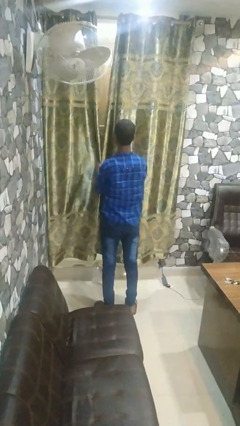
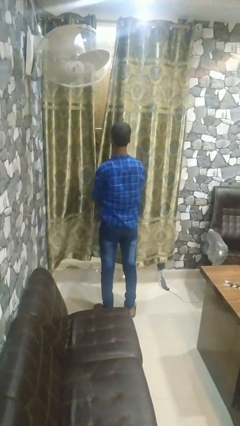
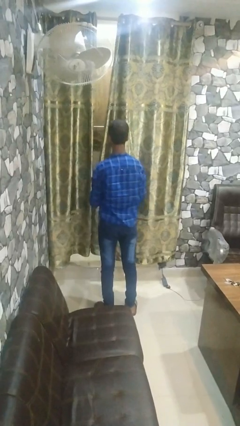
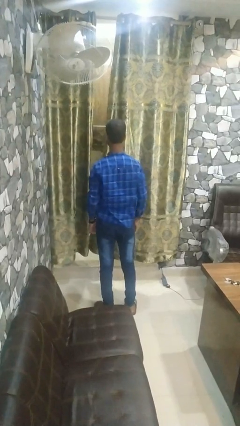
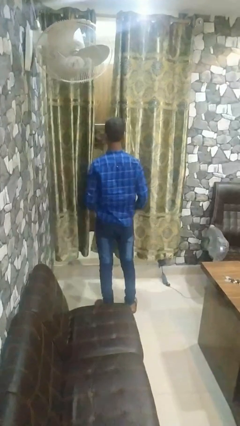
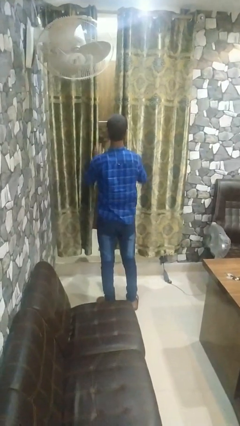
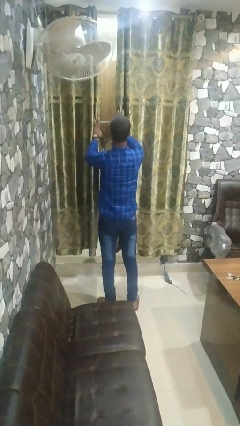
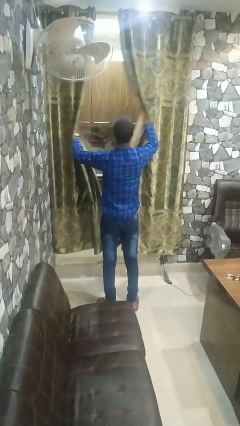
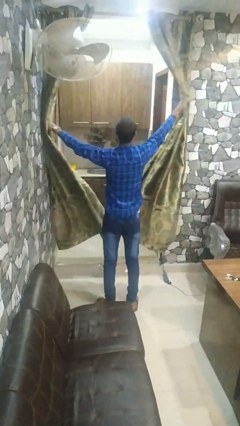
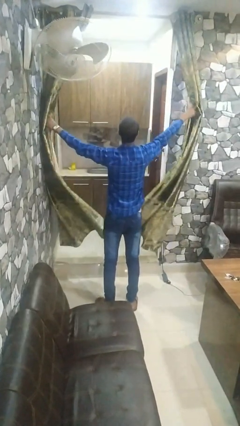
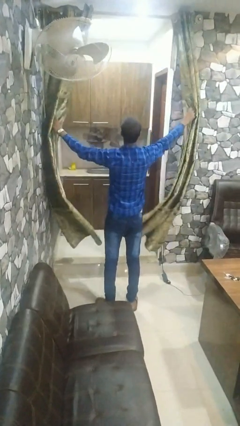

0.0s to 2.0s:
person opens curtains

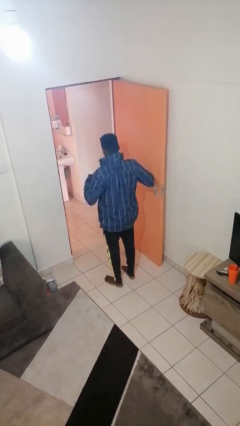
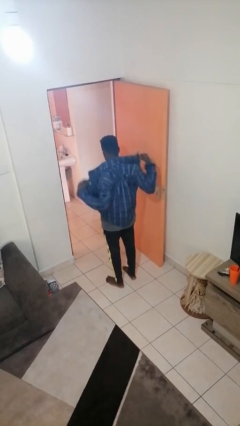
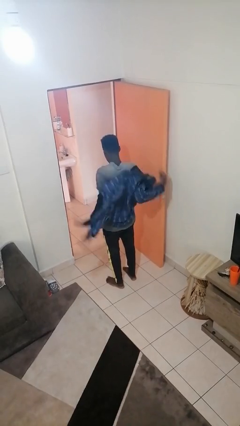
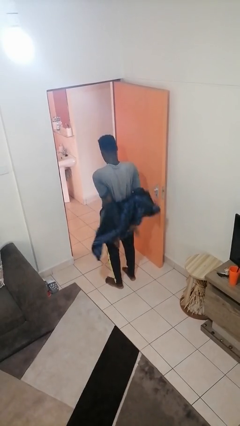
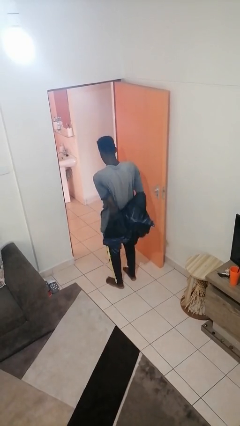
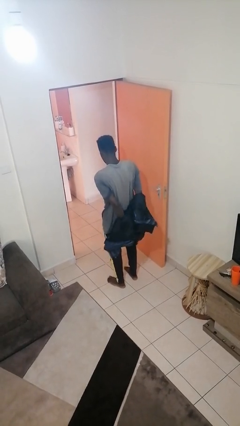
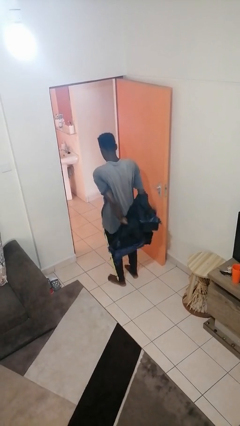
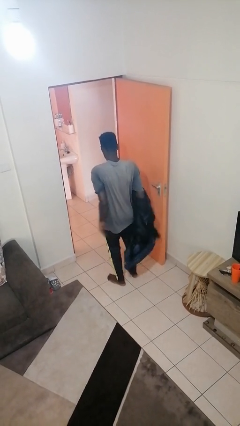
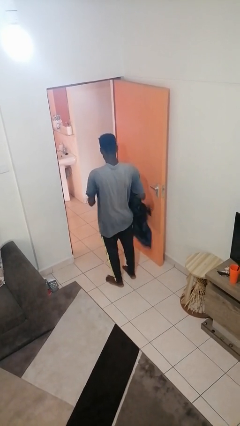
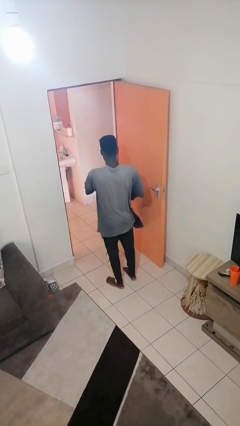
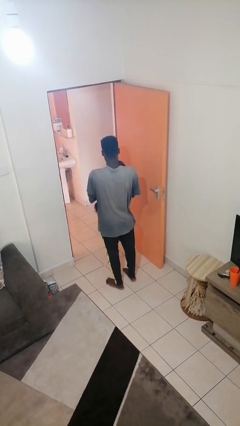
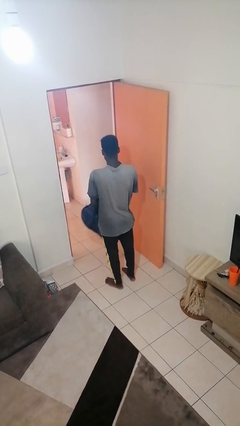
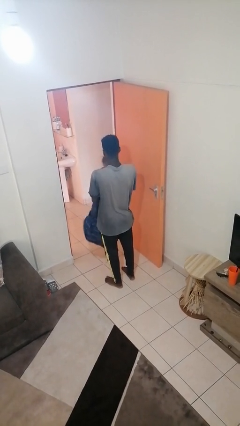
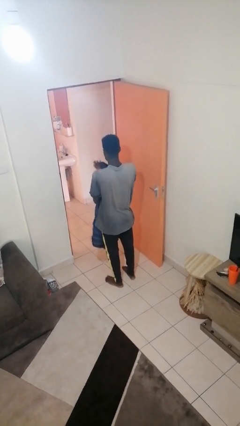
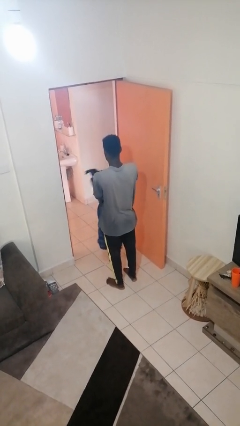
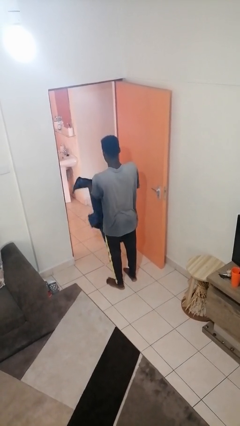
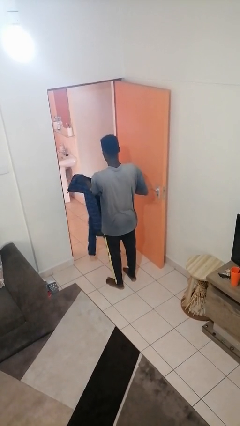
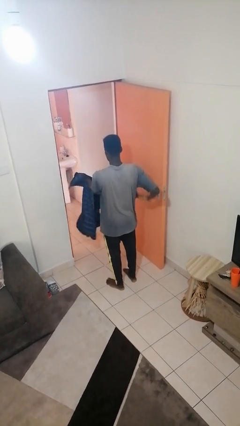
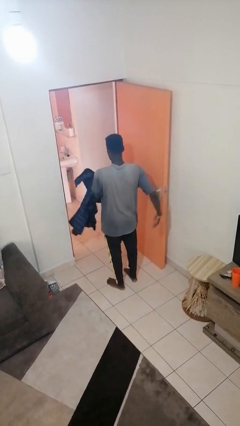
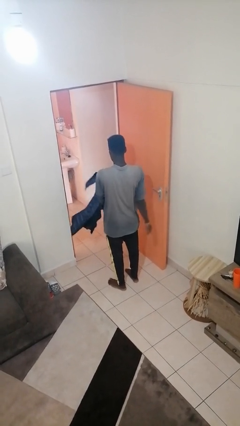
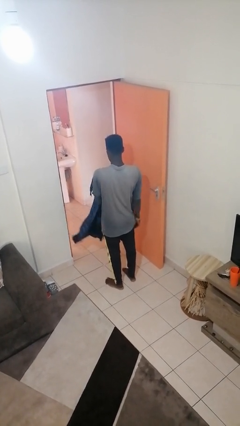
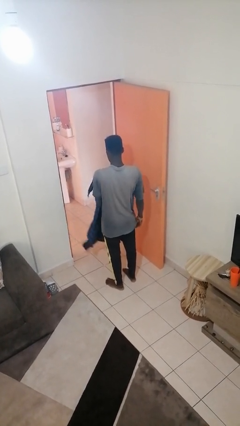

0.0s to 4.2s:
person takes off jacket

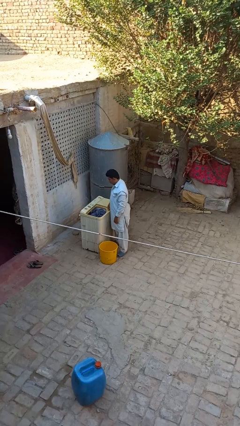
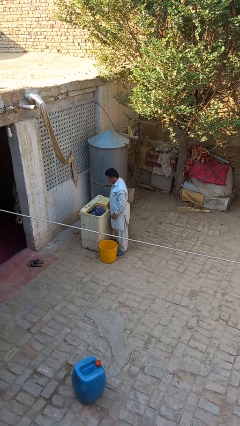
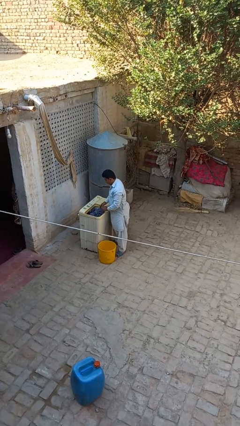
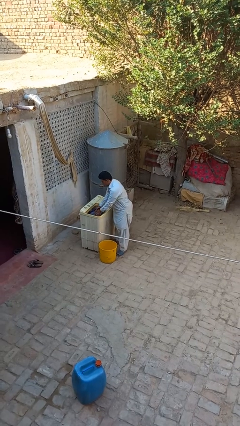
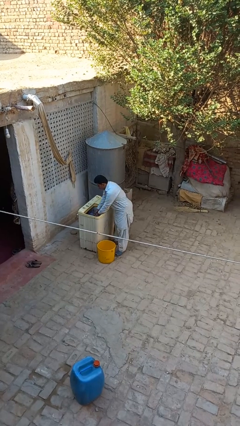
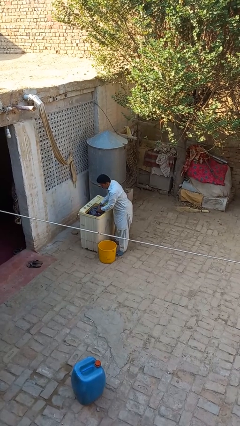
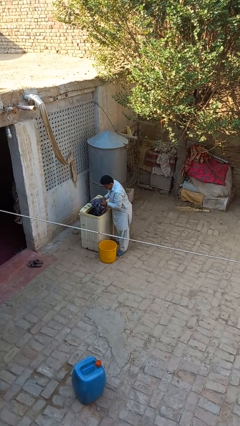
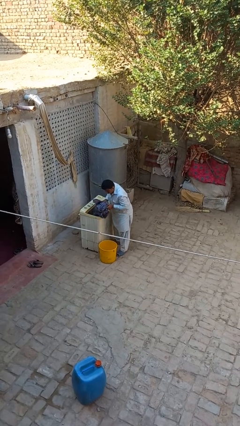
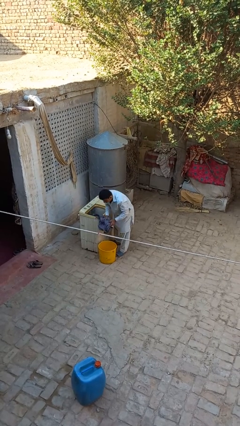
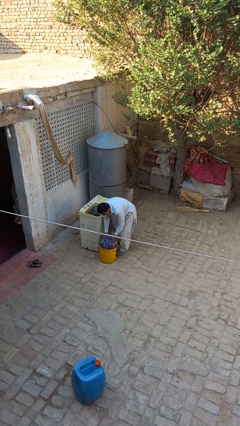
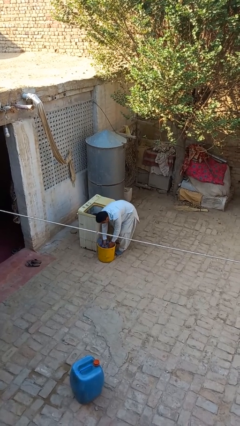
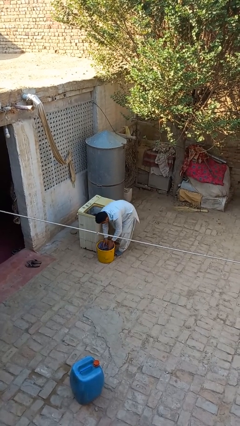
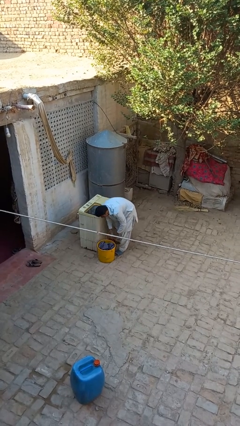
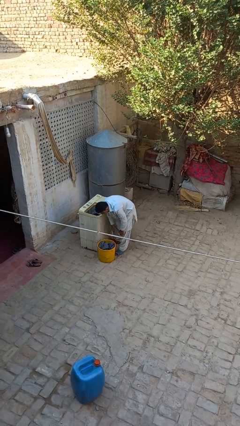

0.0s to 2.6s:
person unloads clotheswasher

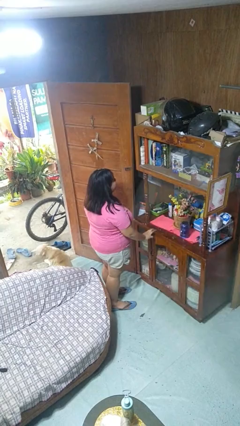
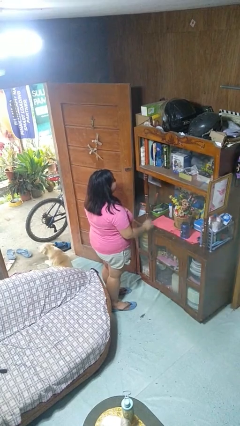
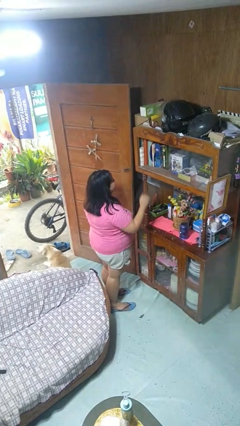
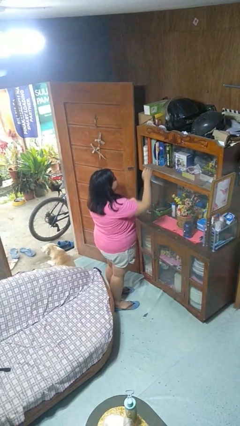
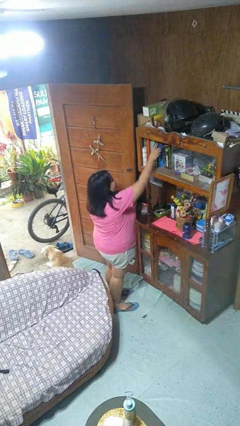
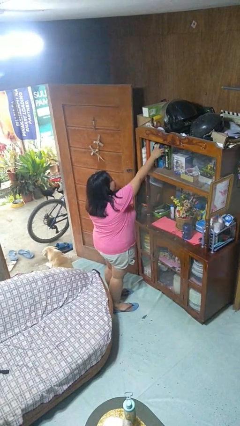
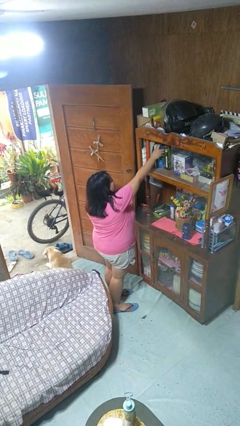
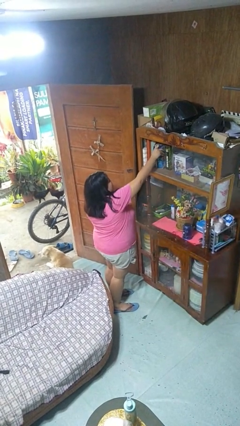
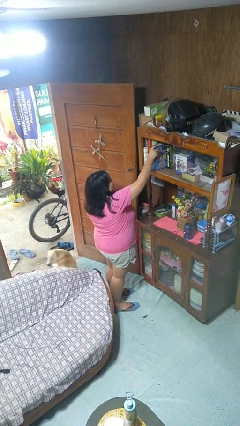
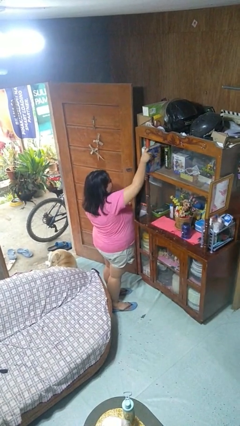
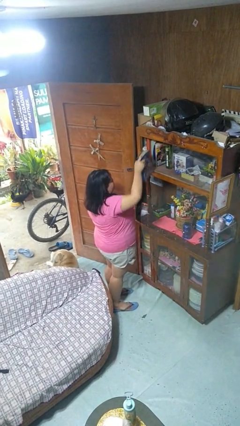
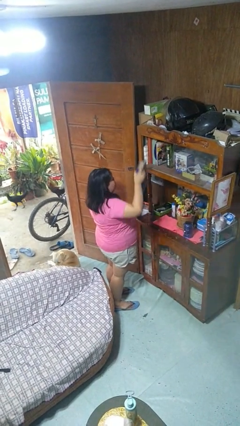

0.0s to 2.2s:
person picks up object from shelf

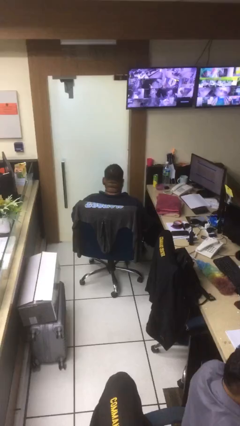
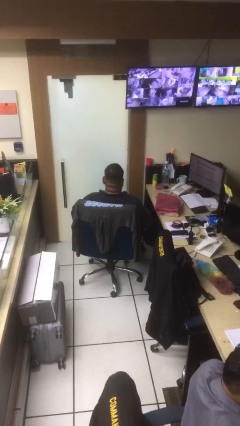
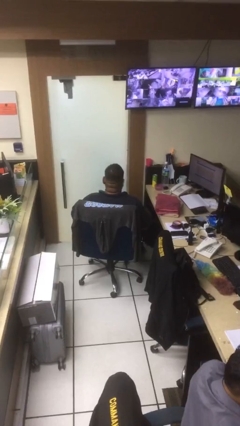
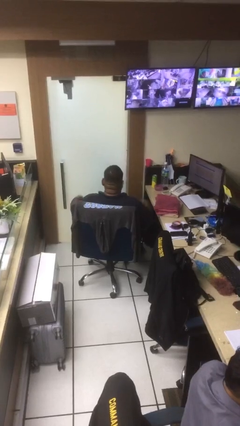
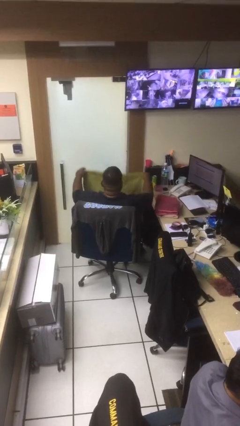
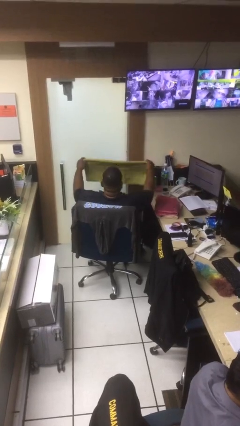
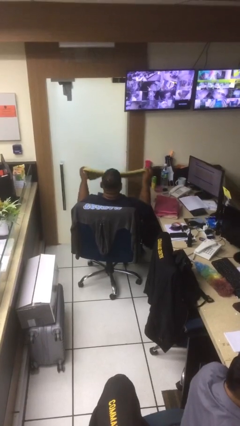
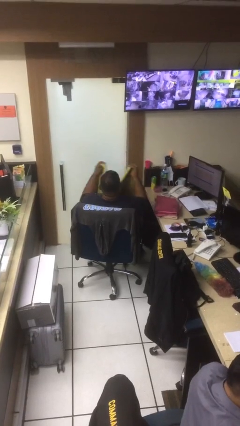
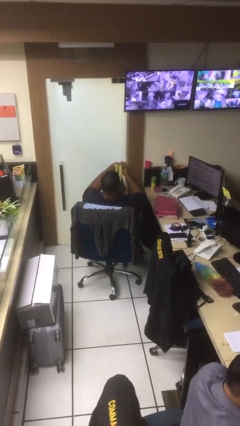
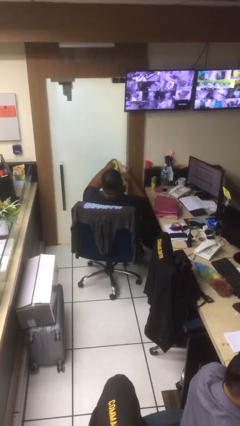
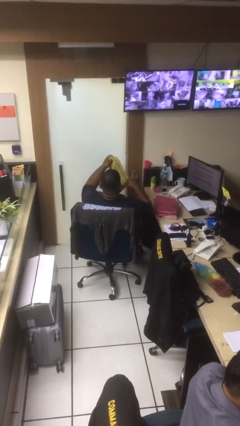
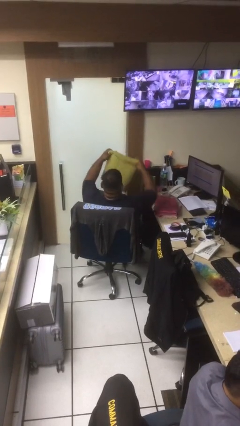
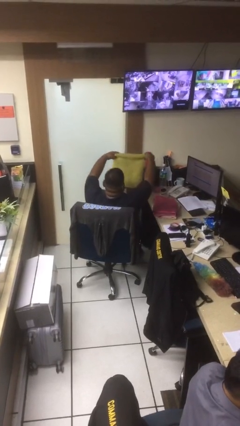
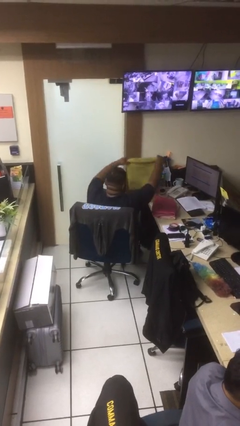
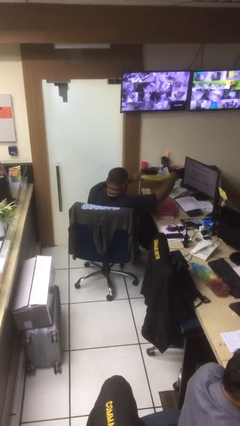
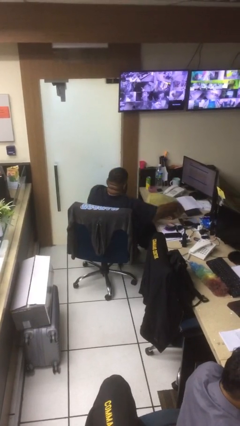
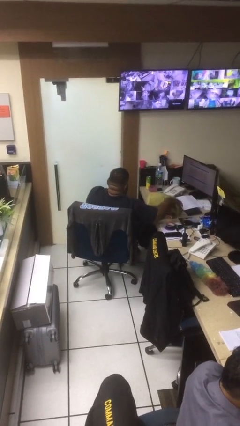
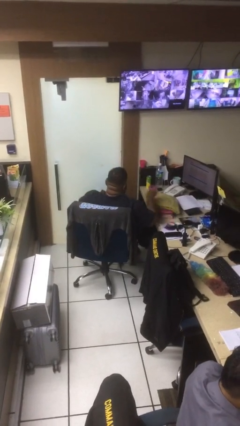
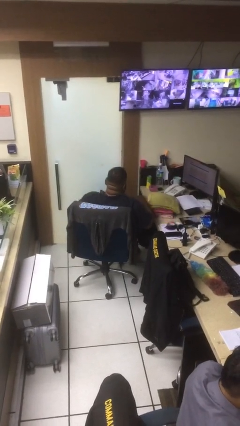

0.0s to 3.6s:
person folds towel

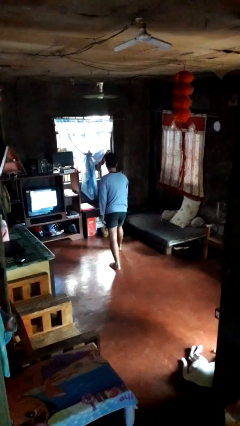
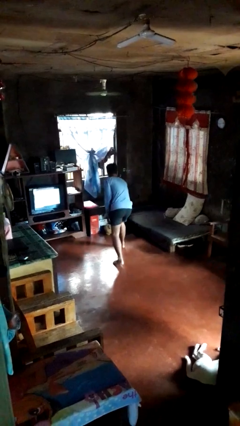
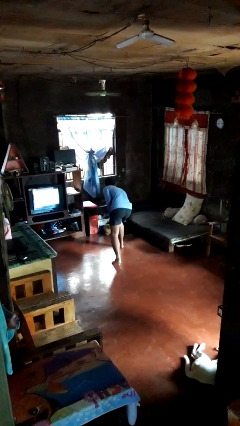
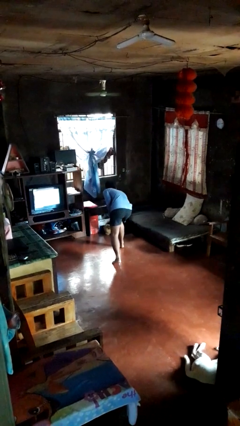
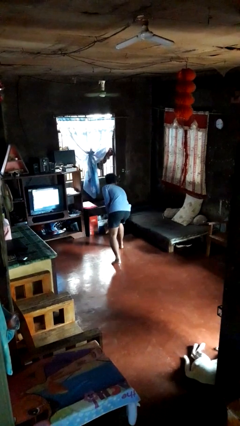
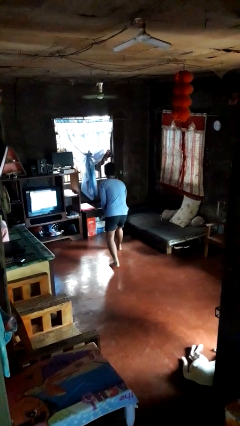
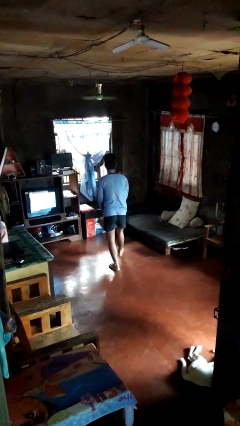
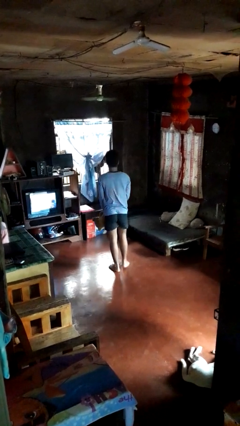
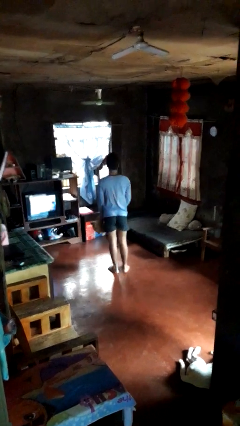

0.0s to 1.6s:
person picks up object from floor

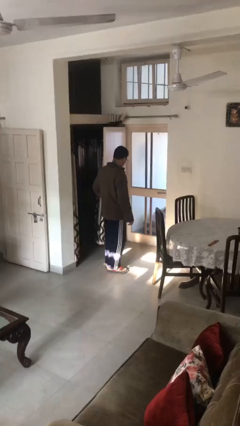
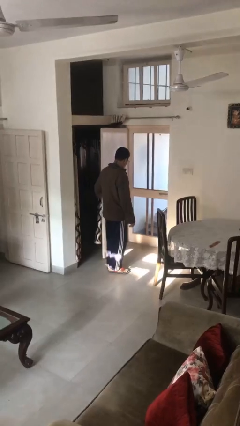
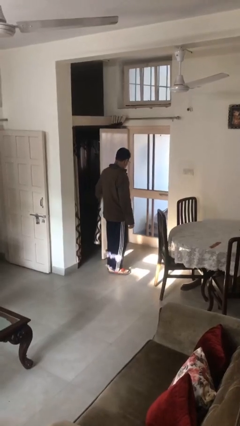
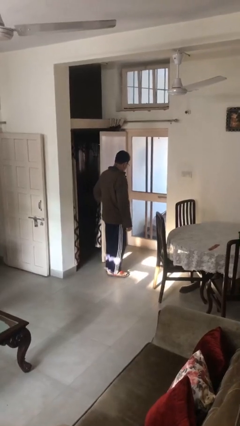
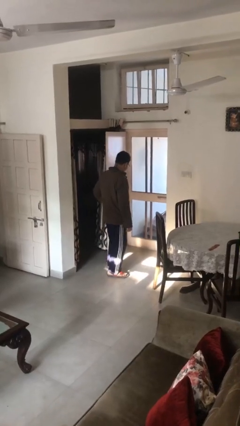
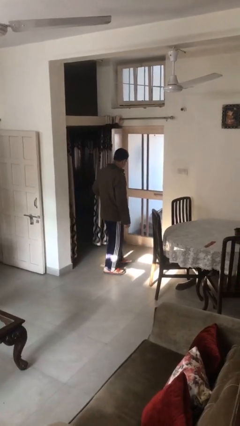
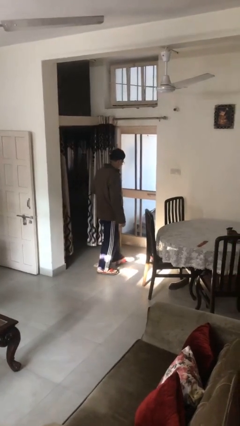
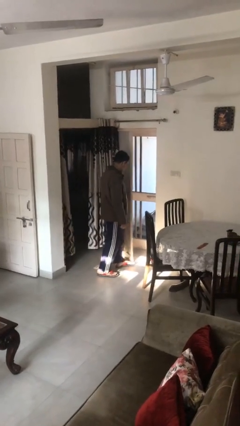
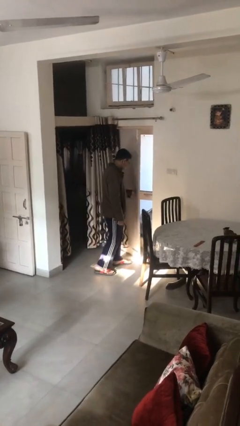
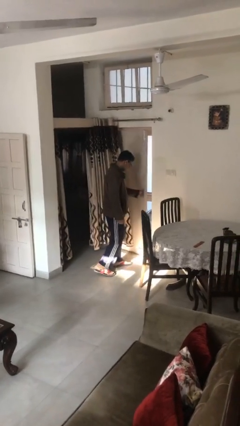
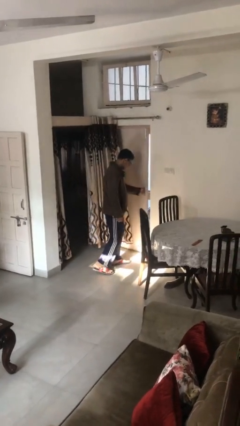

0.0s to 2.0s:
person closes facility door
